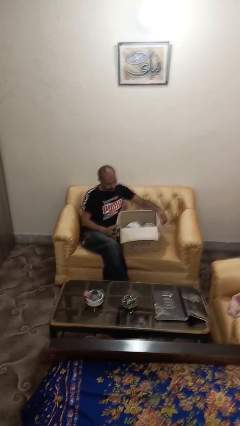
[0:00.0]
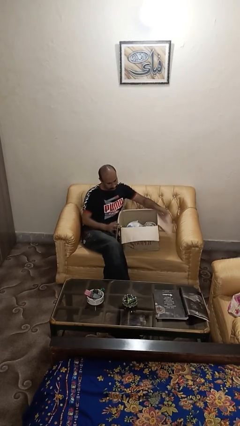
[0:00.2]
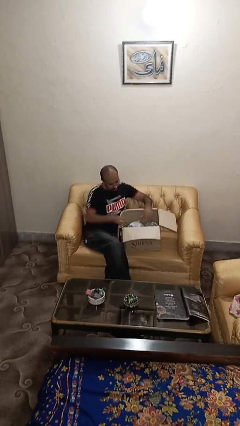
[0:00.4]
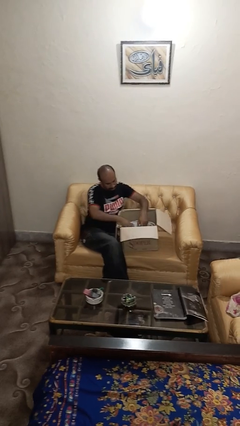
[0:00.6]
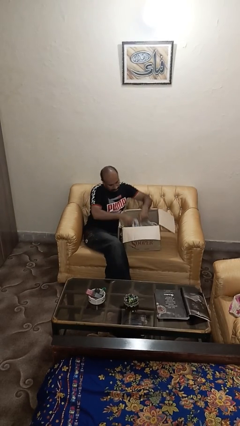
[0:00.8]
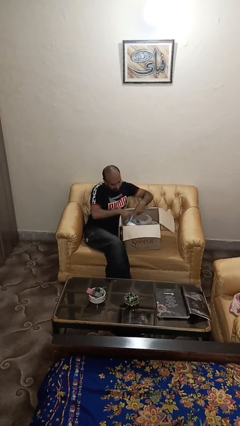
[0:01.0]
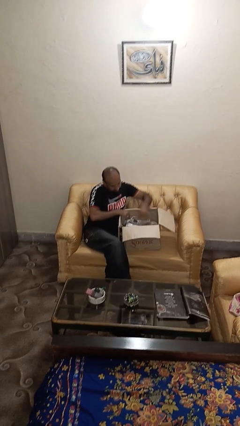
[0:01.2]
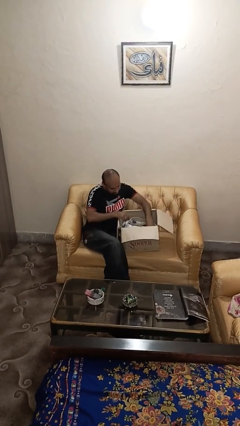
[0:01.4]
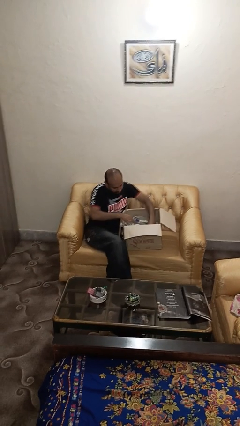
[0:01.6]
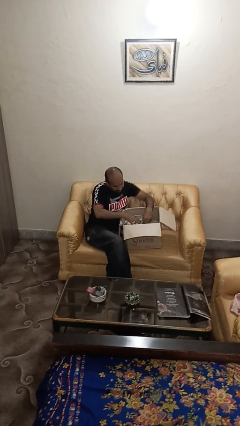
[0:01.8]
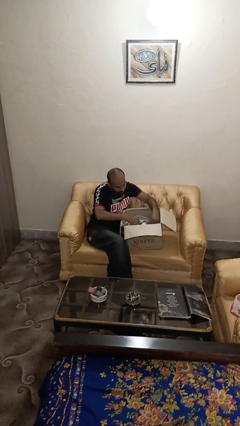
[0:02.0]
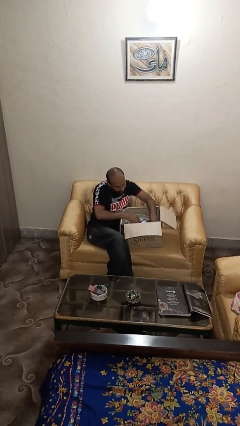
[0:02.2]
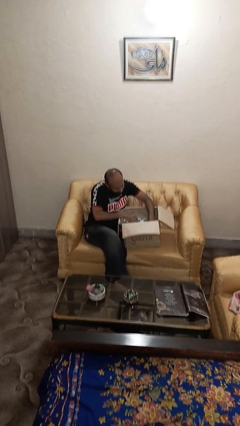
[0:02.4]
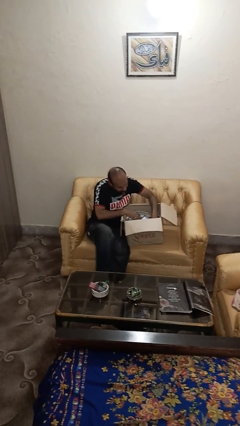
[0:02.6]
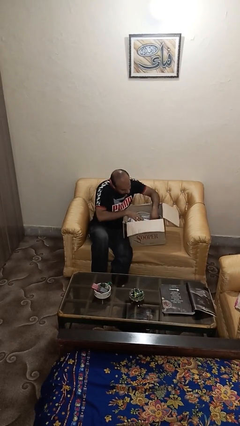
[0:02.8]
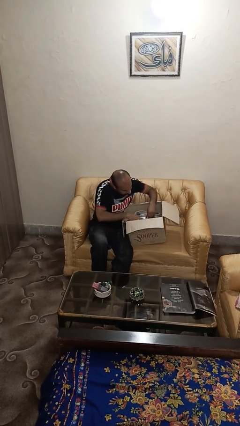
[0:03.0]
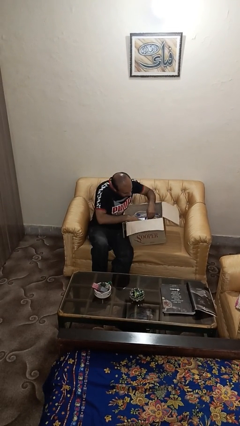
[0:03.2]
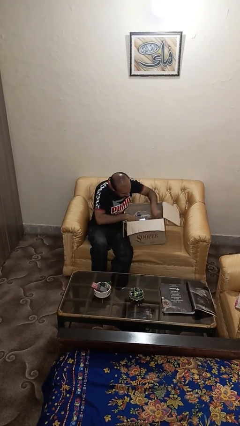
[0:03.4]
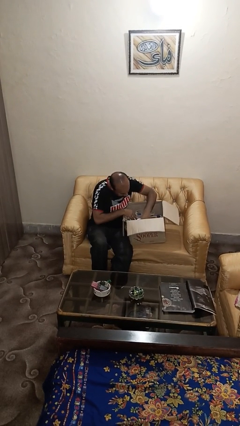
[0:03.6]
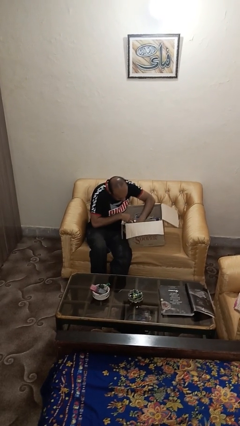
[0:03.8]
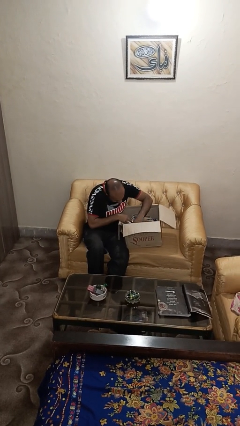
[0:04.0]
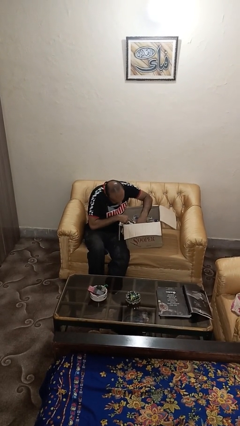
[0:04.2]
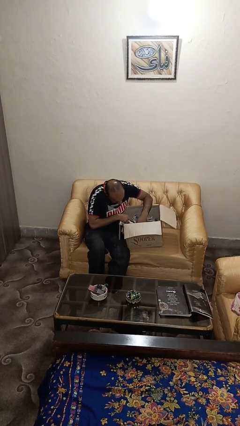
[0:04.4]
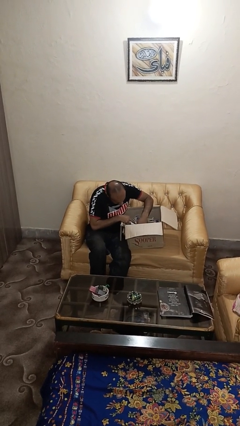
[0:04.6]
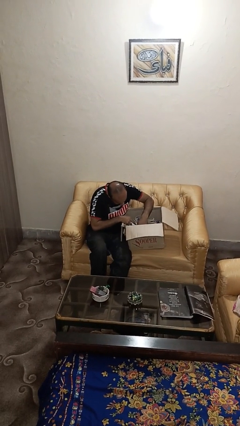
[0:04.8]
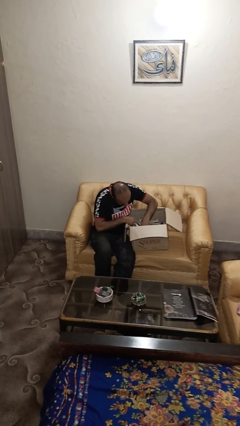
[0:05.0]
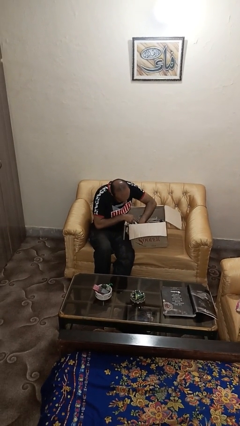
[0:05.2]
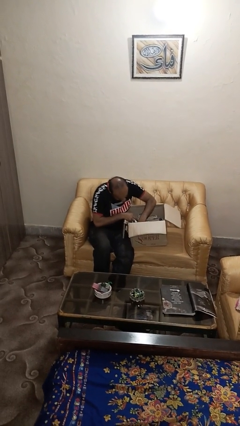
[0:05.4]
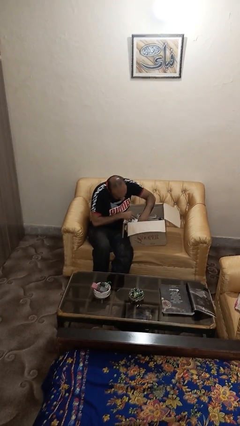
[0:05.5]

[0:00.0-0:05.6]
person searches in box

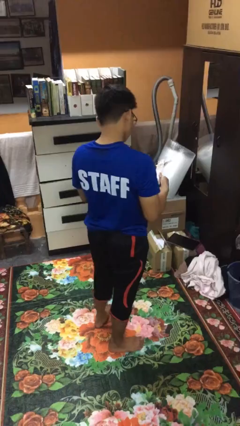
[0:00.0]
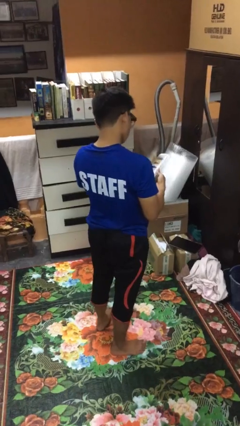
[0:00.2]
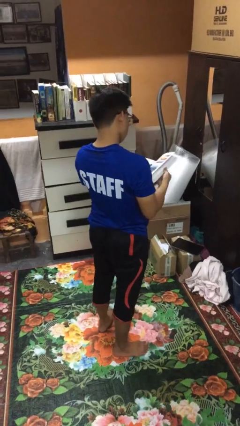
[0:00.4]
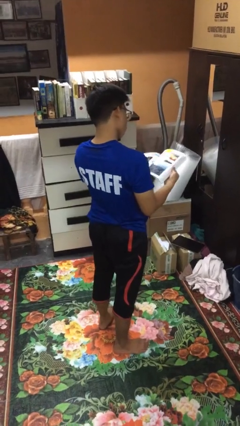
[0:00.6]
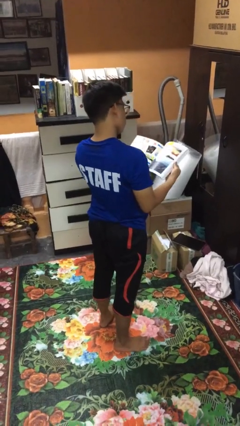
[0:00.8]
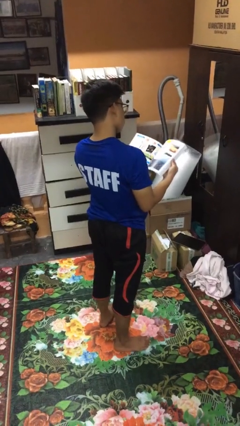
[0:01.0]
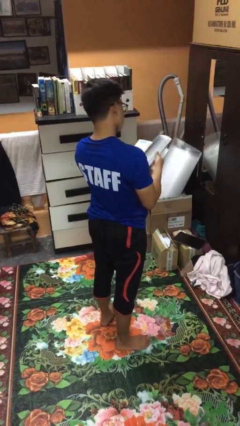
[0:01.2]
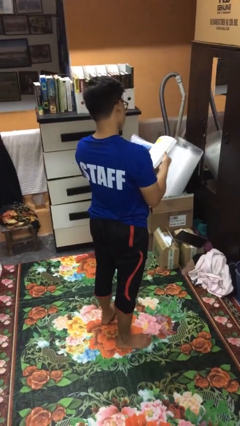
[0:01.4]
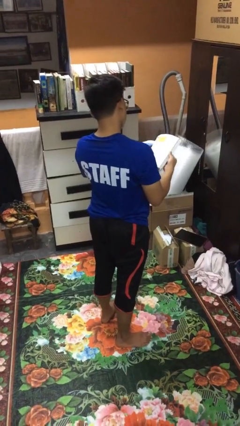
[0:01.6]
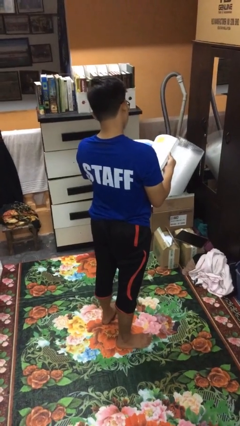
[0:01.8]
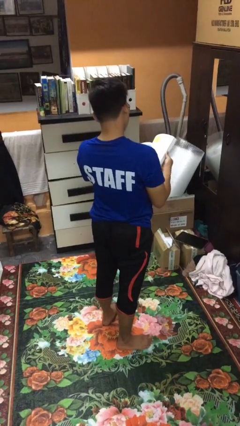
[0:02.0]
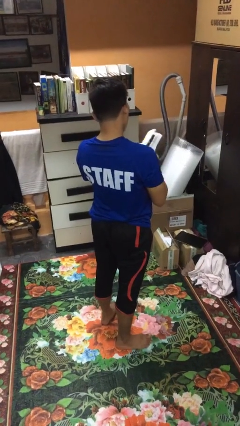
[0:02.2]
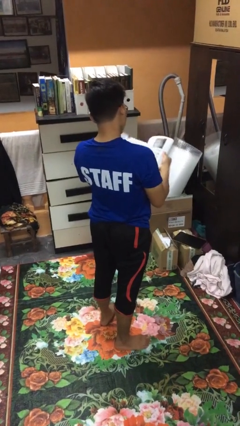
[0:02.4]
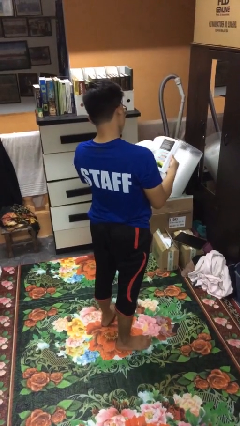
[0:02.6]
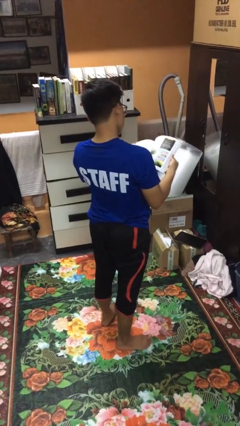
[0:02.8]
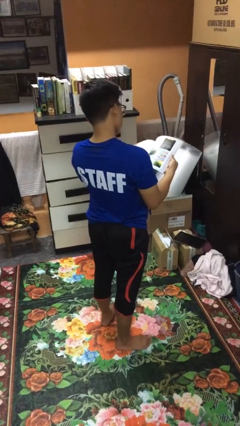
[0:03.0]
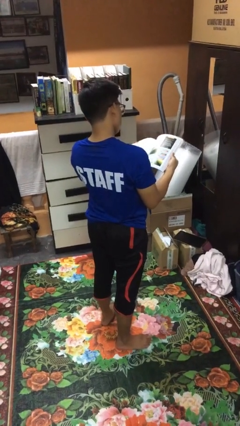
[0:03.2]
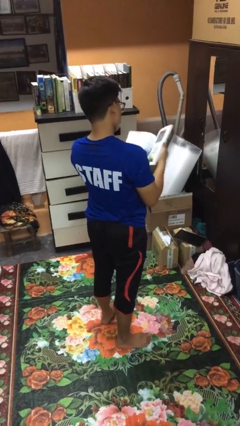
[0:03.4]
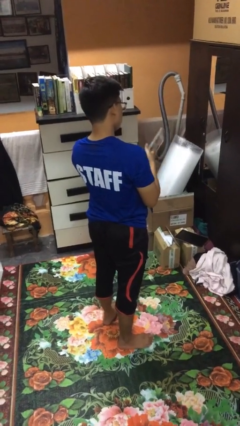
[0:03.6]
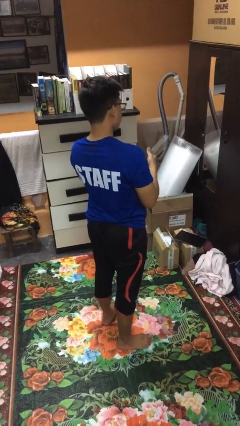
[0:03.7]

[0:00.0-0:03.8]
person reads magazine

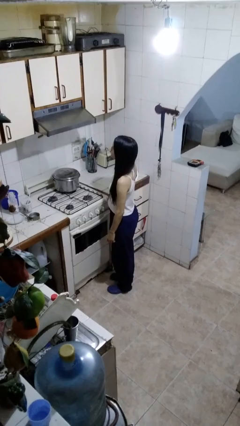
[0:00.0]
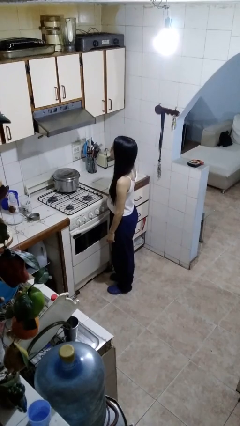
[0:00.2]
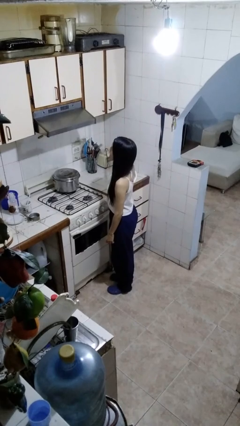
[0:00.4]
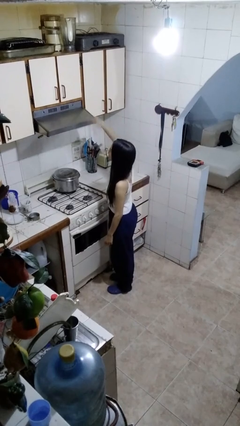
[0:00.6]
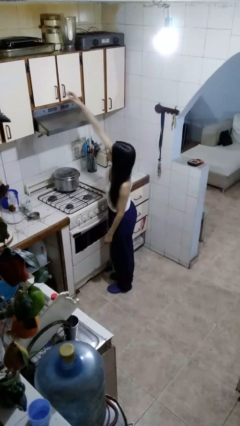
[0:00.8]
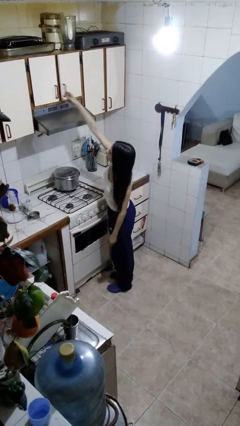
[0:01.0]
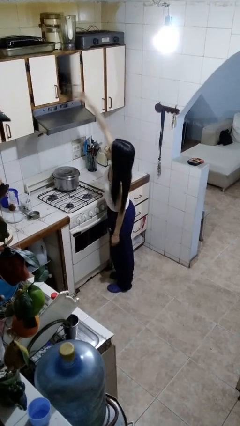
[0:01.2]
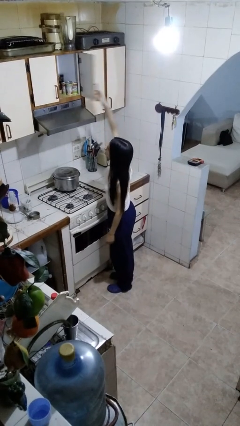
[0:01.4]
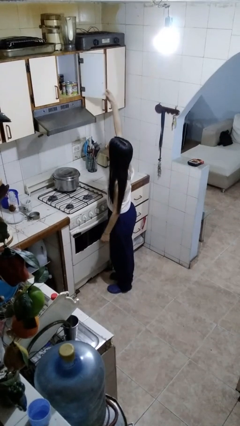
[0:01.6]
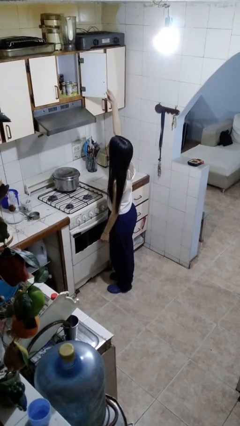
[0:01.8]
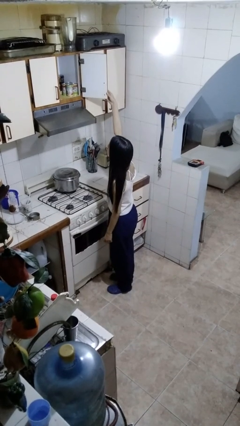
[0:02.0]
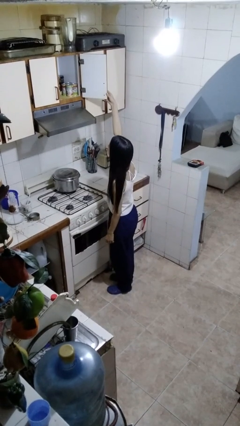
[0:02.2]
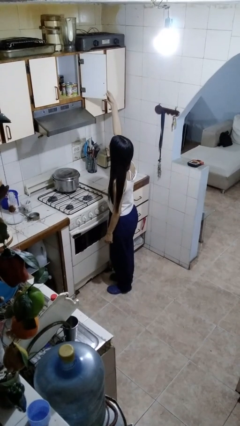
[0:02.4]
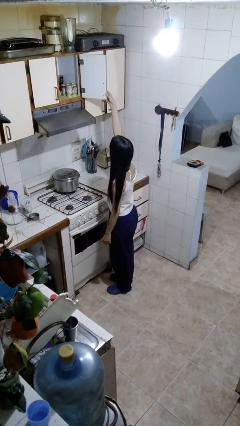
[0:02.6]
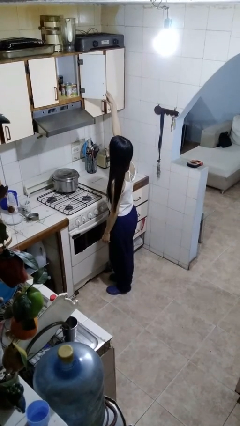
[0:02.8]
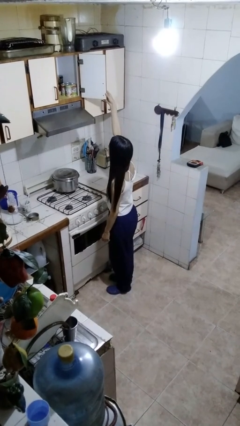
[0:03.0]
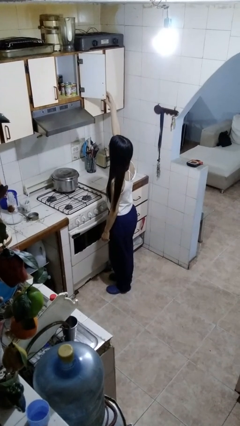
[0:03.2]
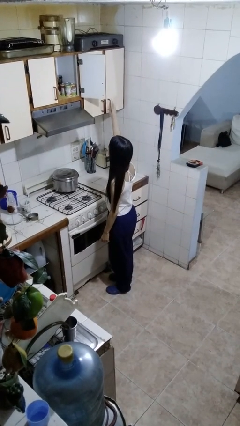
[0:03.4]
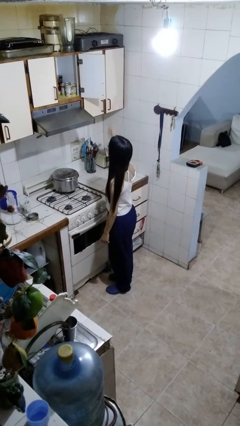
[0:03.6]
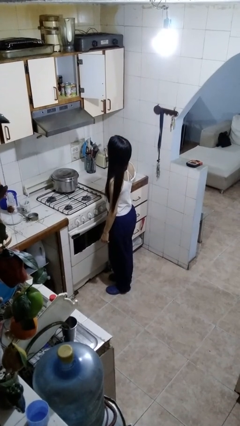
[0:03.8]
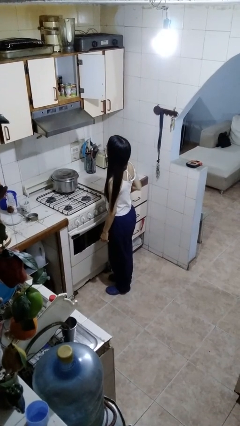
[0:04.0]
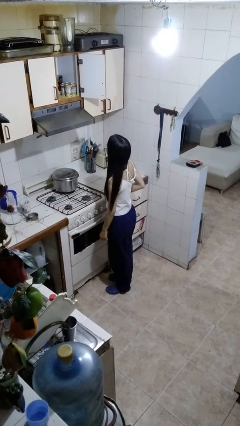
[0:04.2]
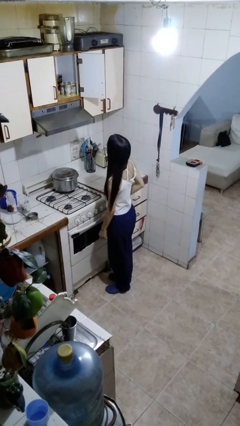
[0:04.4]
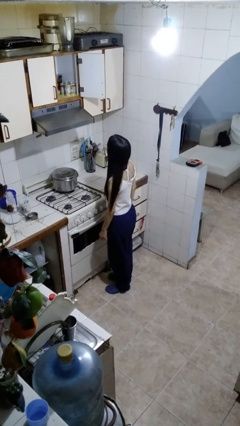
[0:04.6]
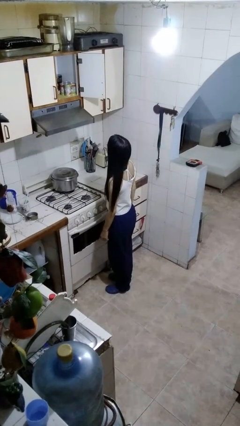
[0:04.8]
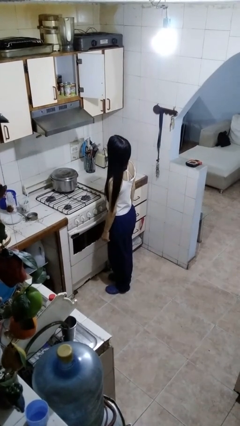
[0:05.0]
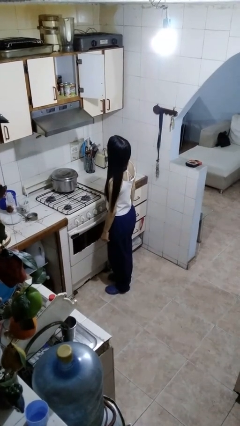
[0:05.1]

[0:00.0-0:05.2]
person opens cabinet

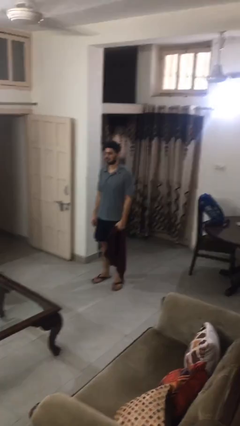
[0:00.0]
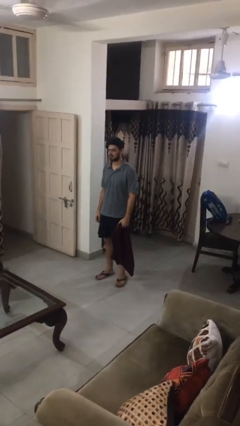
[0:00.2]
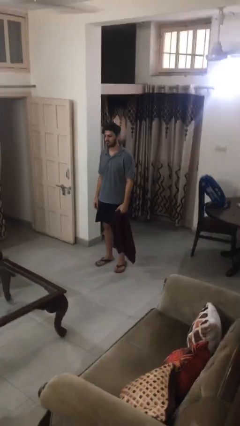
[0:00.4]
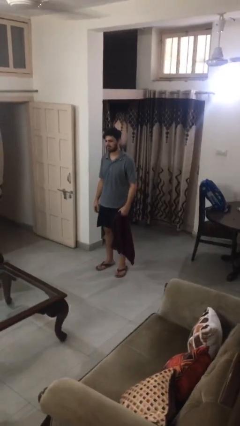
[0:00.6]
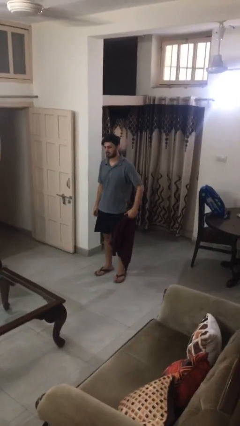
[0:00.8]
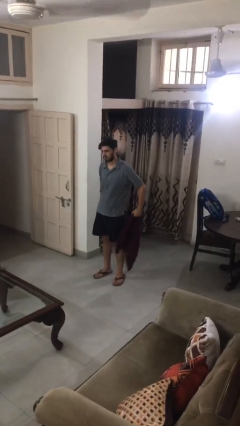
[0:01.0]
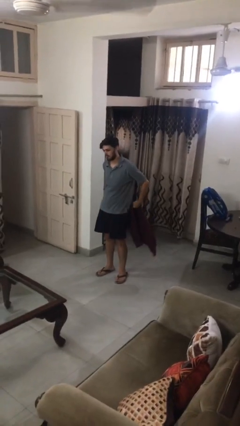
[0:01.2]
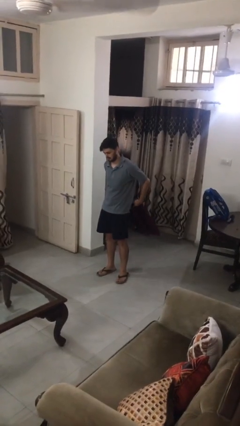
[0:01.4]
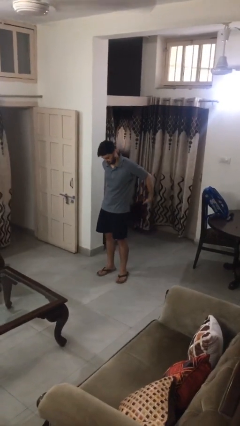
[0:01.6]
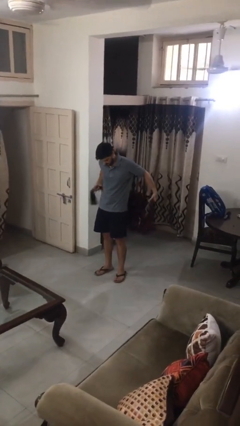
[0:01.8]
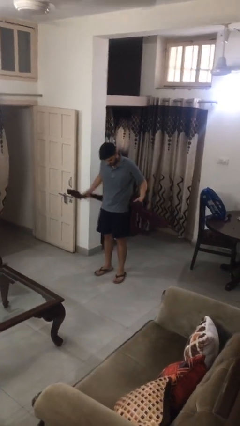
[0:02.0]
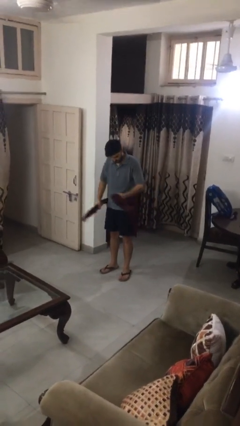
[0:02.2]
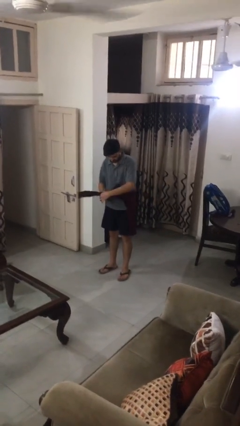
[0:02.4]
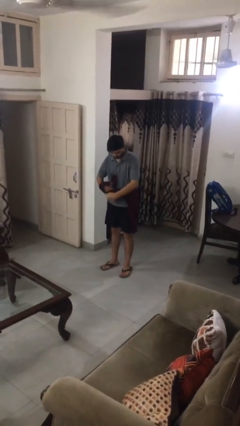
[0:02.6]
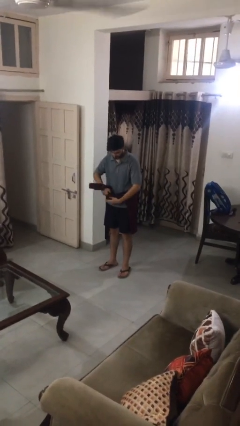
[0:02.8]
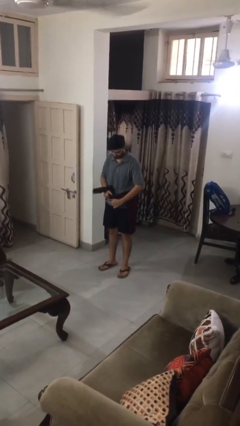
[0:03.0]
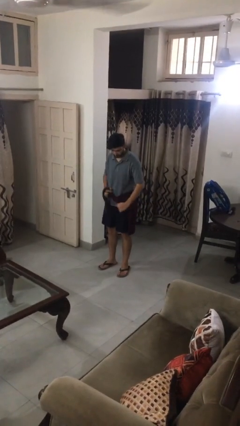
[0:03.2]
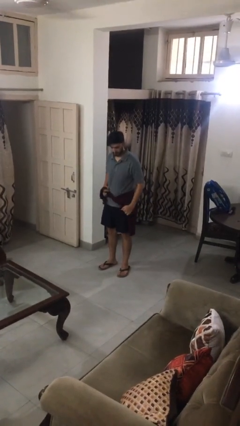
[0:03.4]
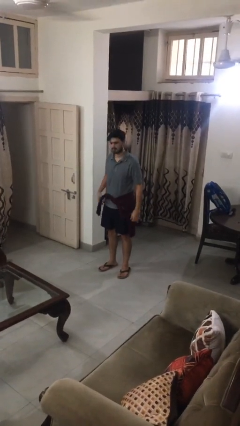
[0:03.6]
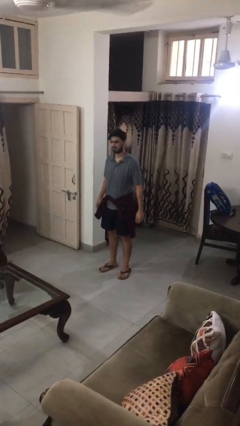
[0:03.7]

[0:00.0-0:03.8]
person ties jacket around waist
